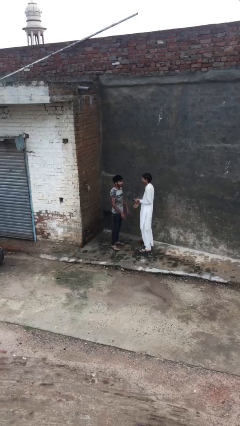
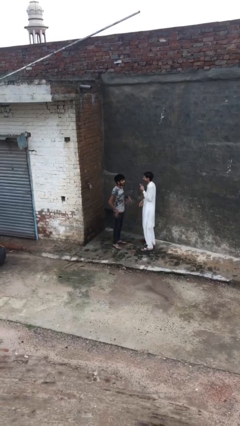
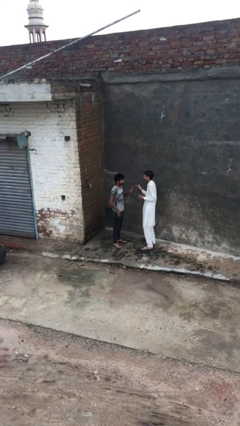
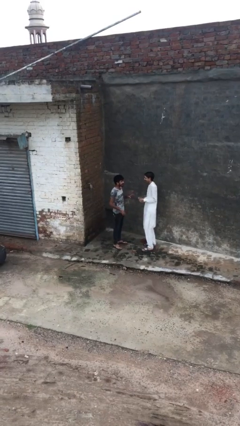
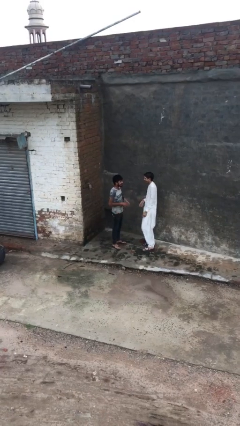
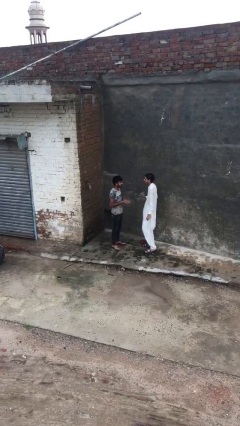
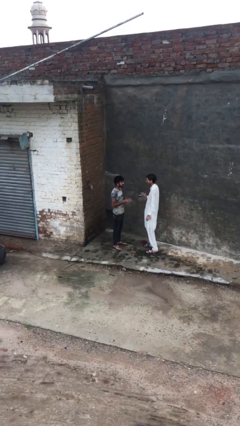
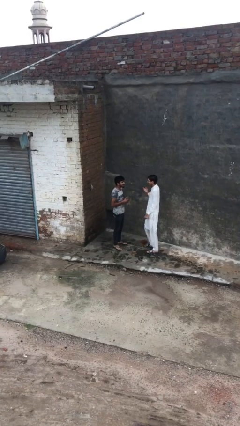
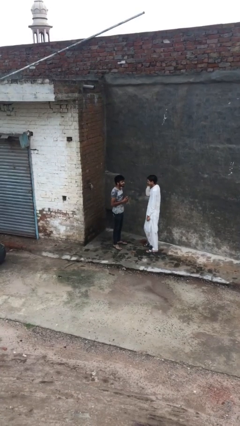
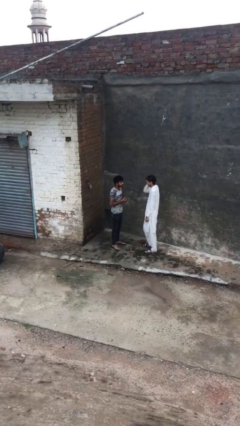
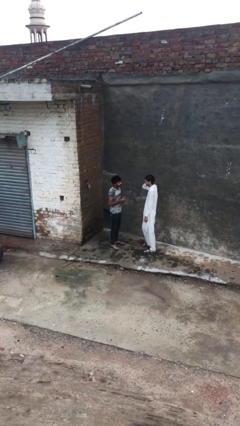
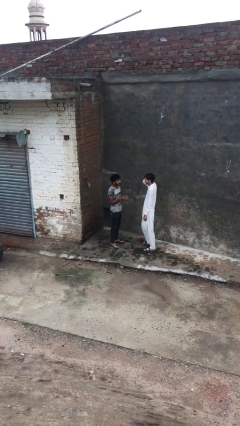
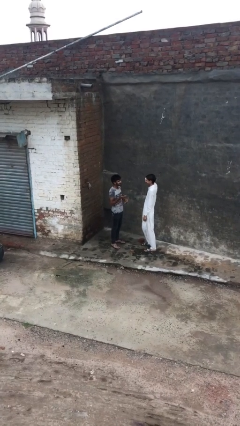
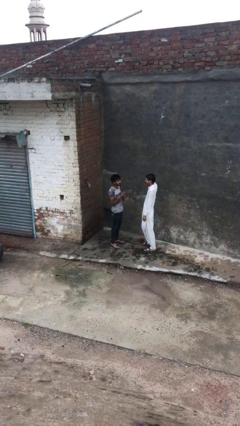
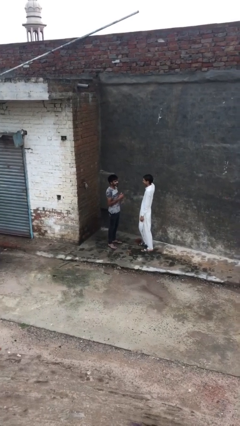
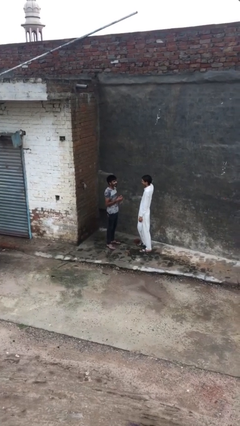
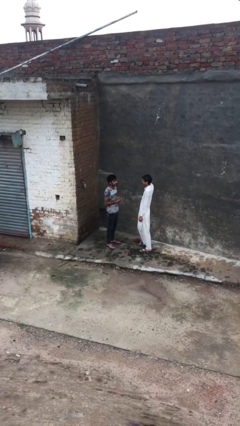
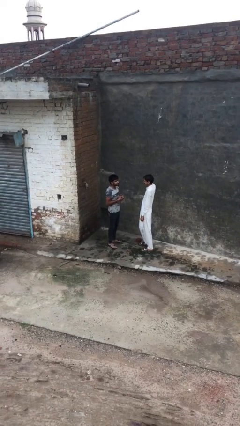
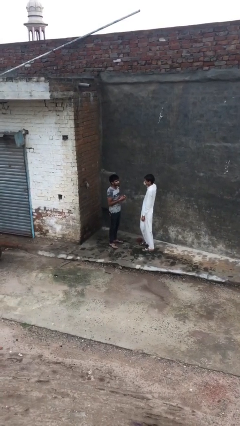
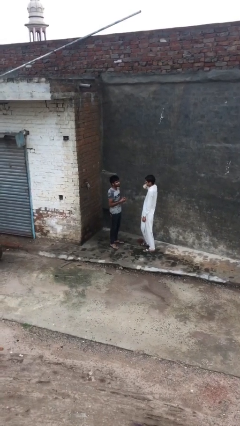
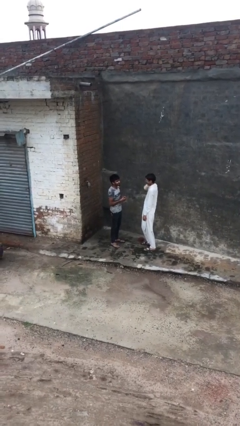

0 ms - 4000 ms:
person talks to person

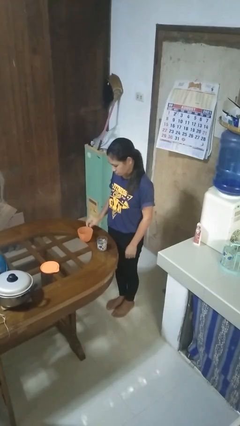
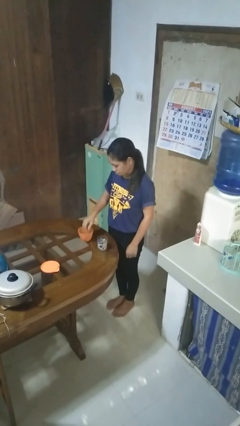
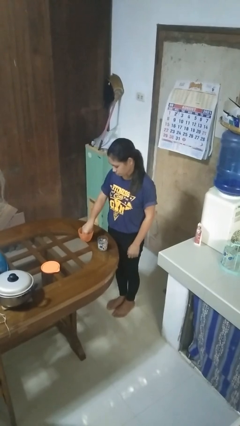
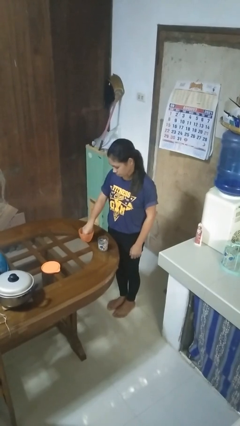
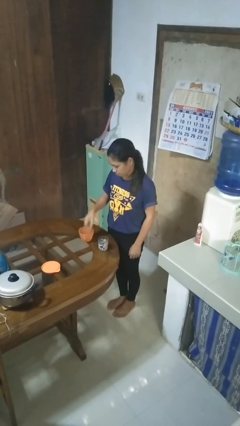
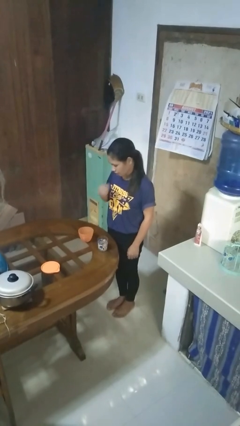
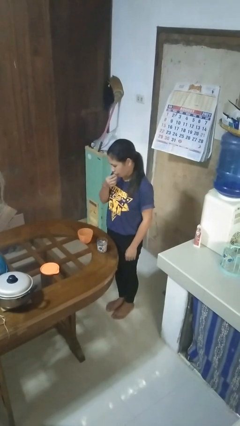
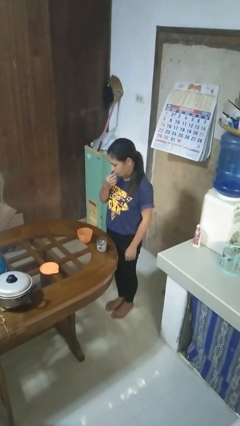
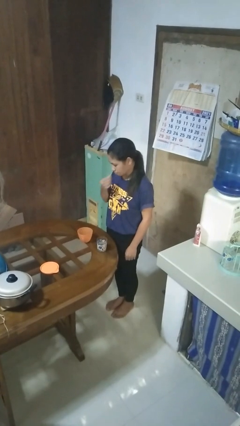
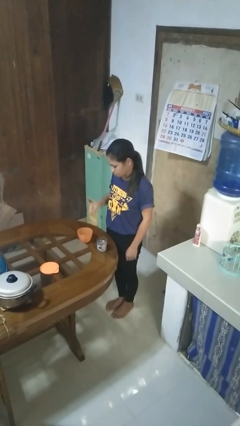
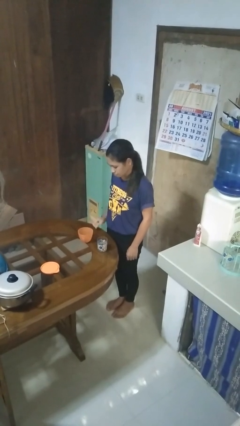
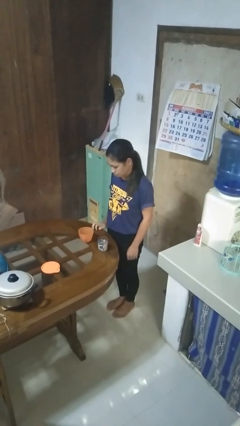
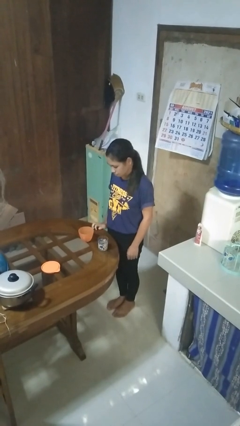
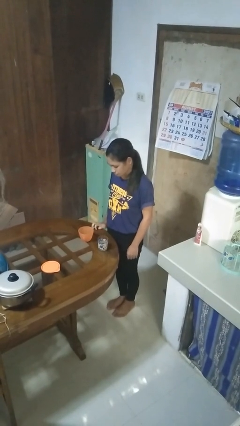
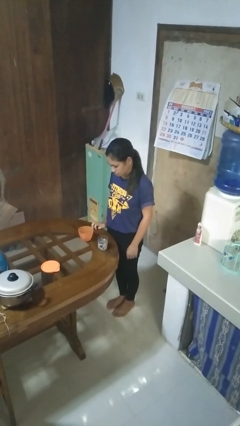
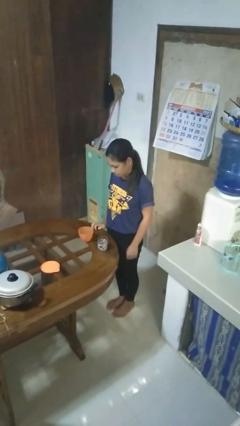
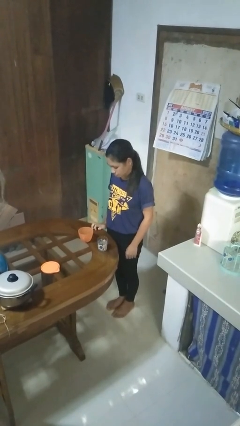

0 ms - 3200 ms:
person takes medicine pills

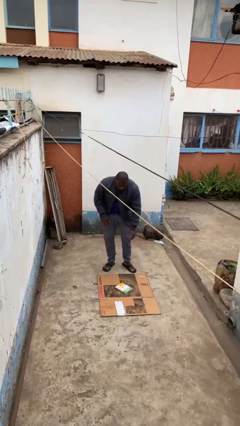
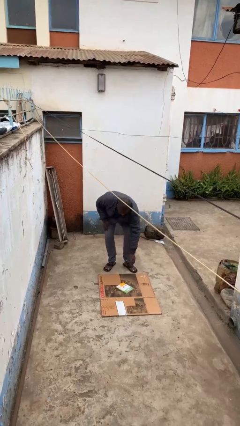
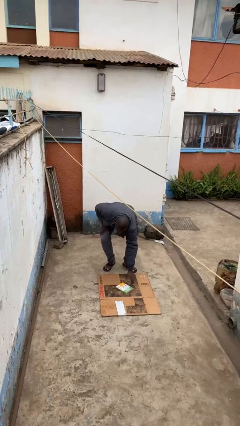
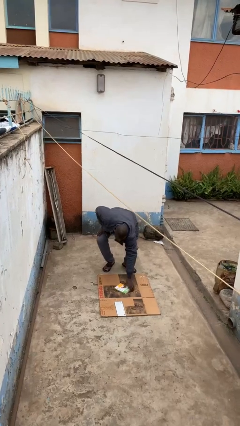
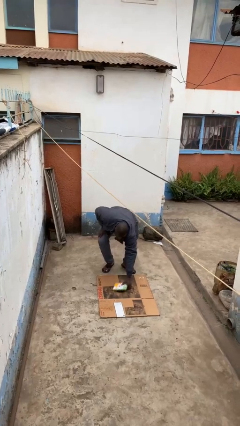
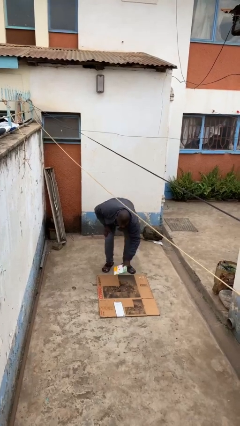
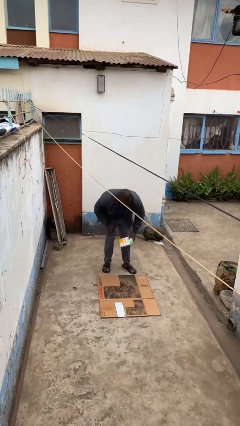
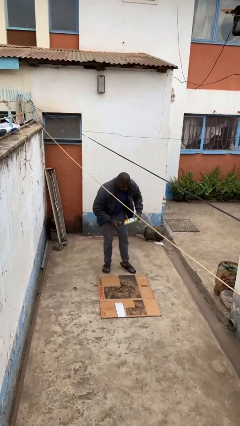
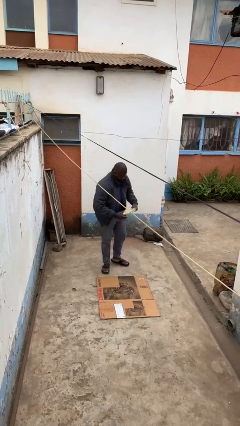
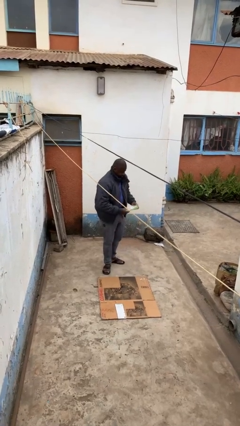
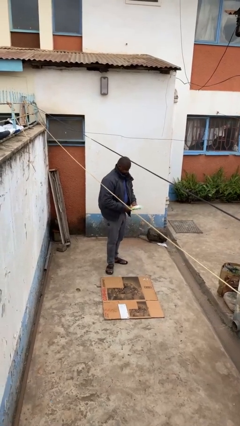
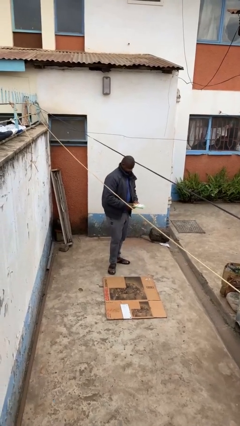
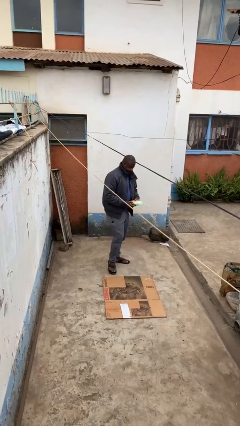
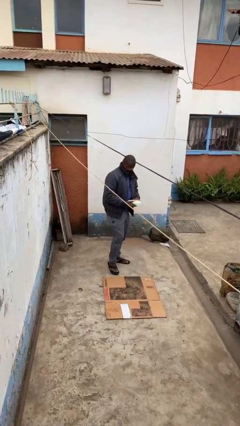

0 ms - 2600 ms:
person picks up object from floor

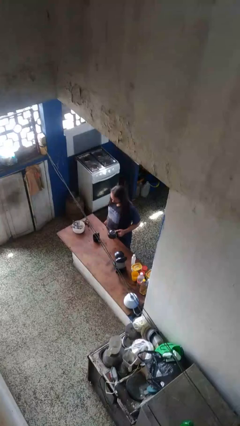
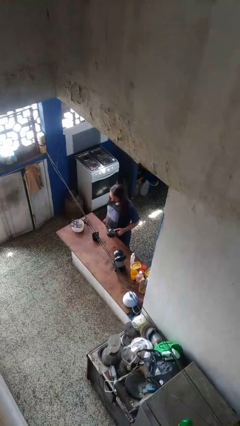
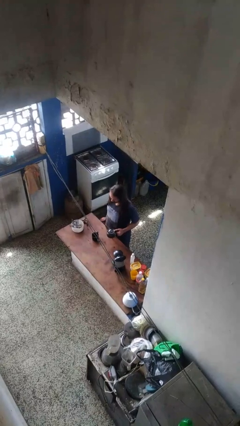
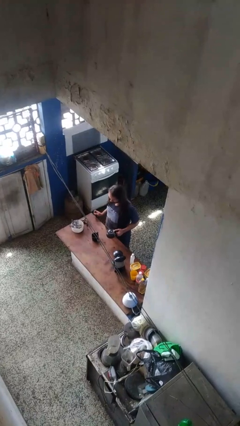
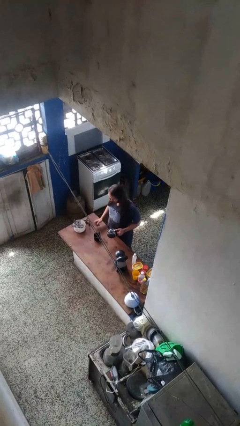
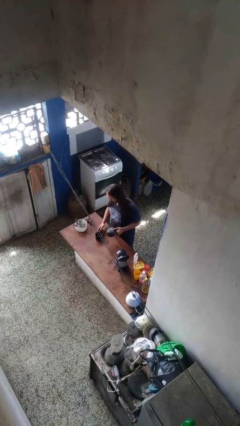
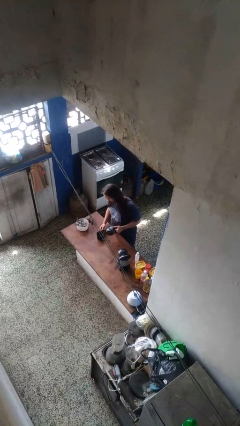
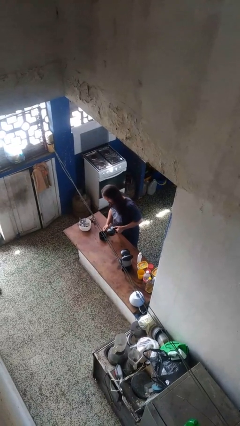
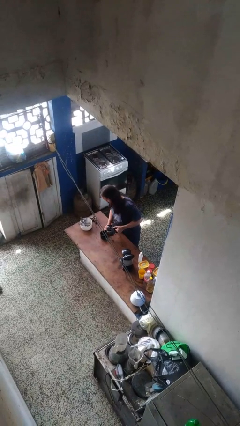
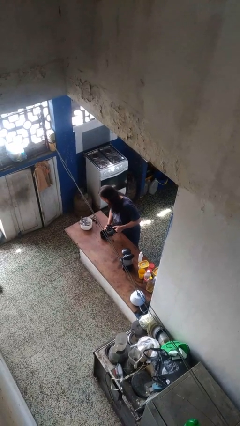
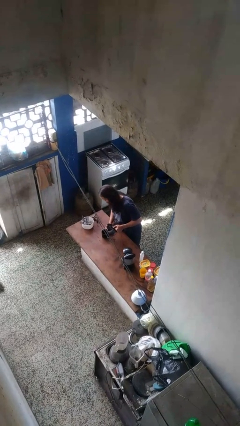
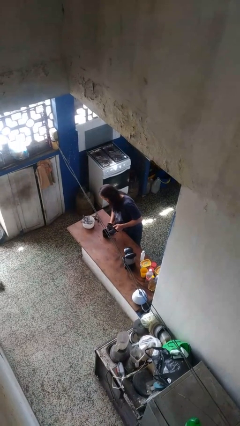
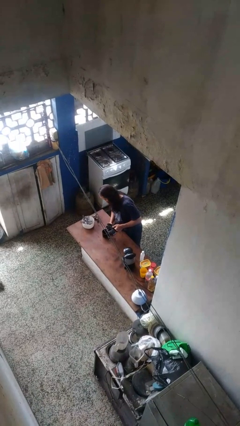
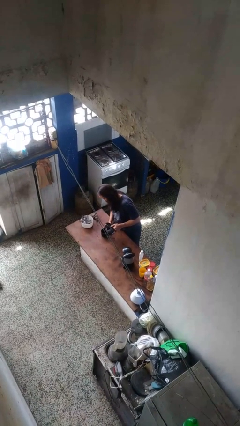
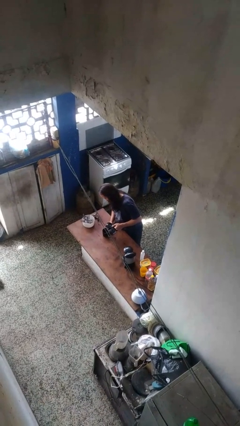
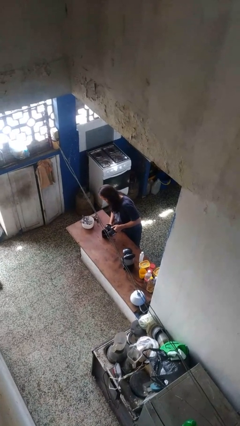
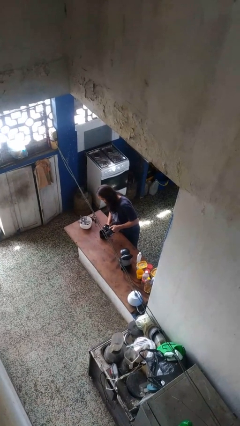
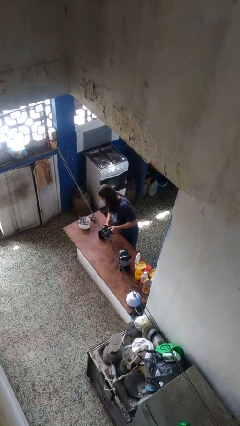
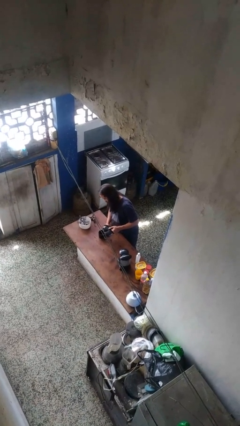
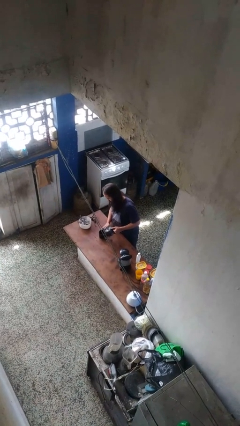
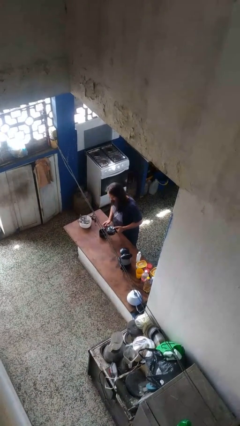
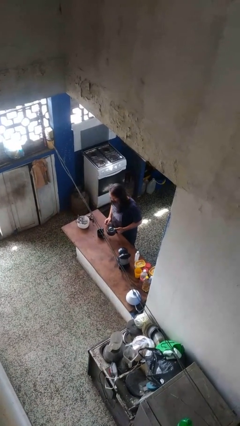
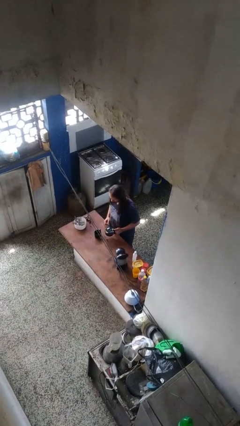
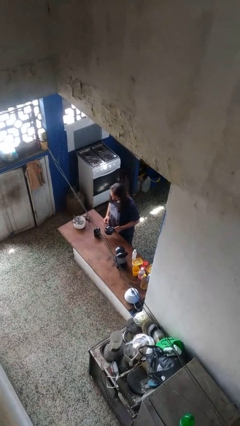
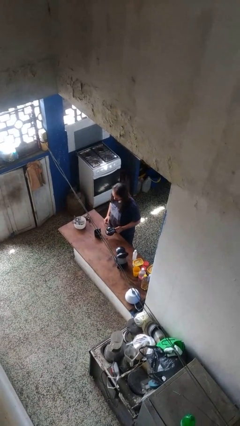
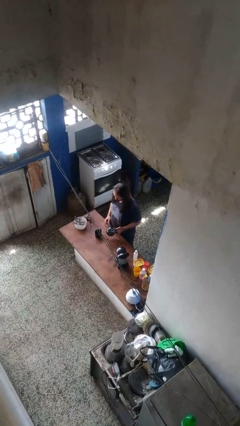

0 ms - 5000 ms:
person pours coffee into mug

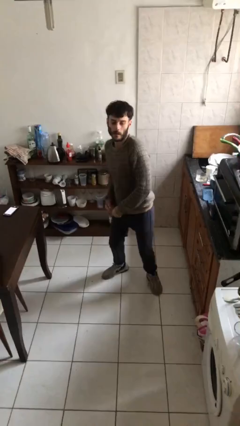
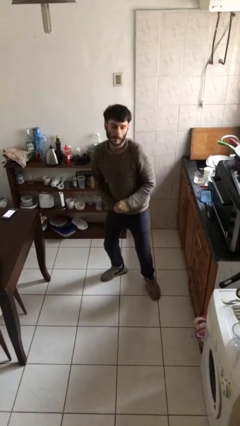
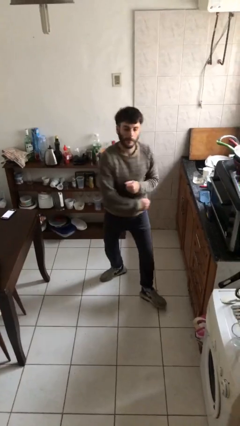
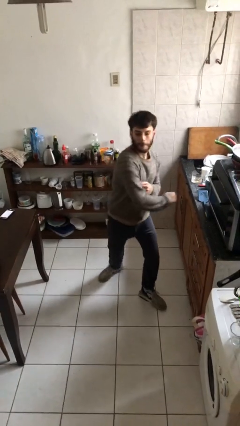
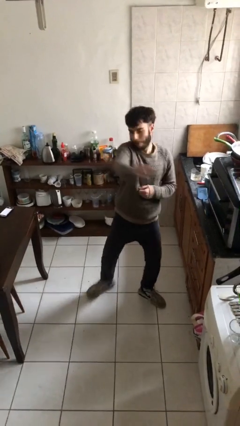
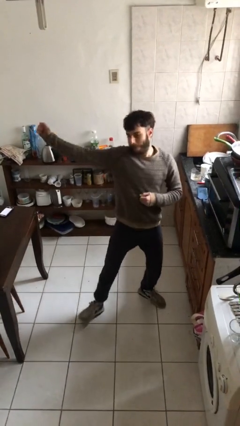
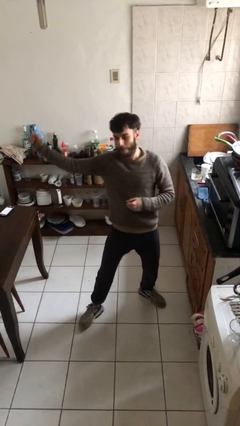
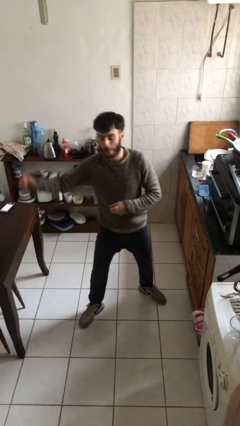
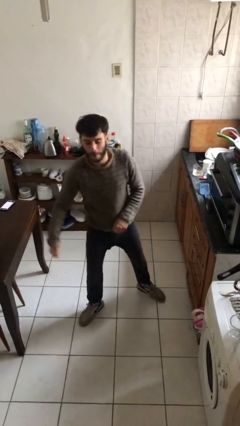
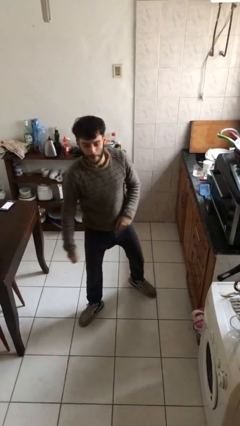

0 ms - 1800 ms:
person karate chop

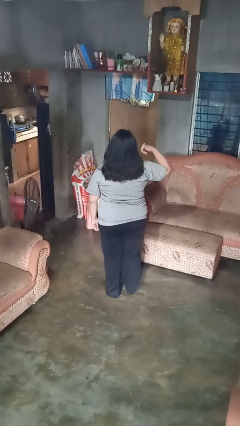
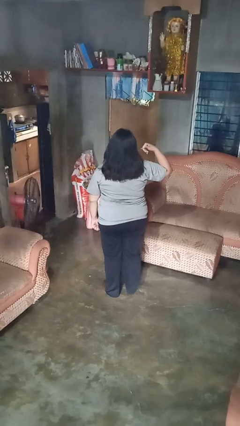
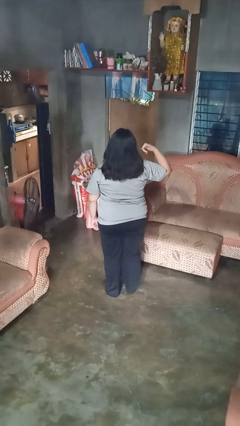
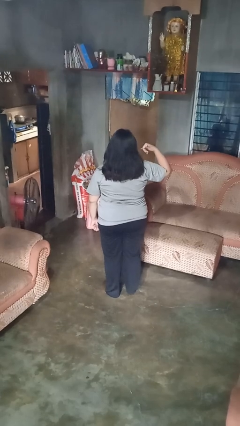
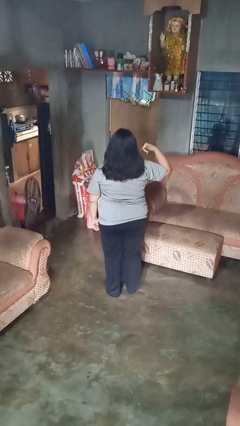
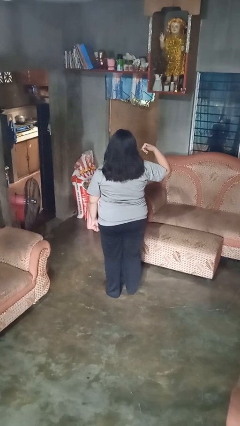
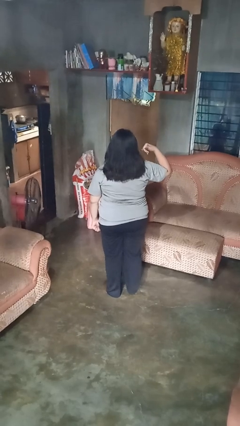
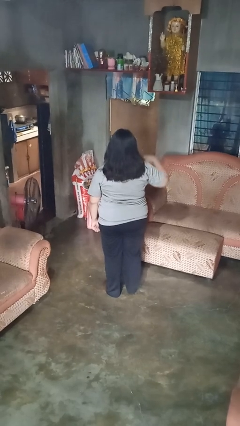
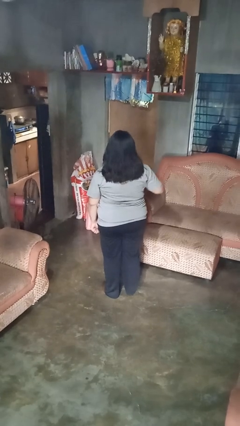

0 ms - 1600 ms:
person gestures call me
